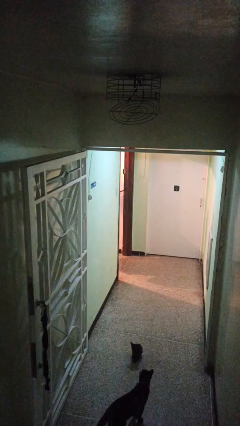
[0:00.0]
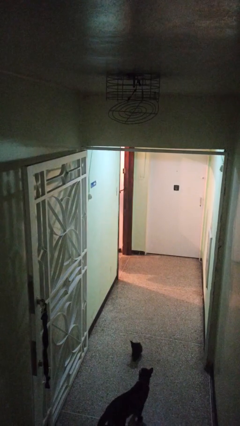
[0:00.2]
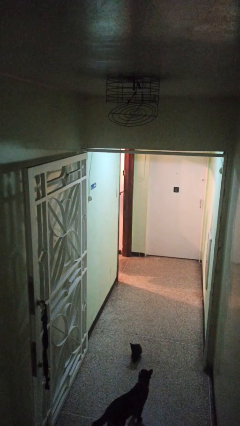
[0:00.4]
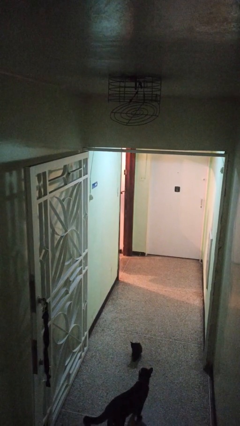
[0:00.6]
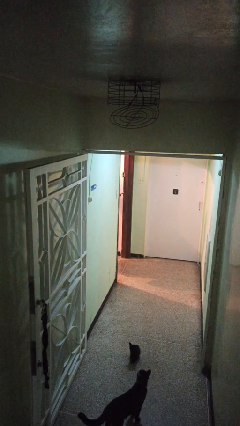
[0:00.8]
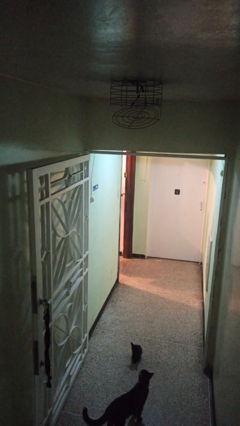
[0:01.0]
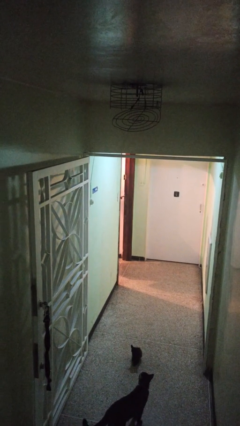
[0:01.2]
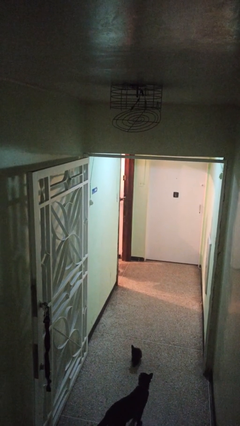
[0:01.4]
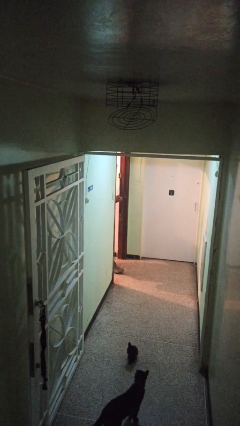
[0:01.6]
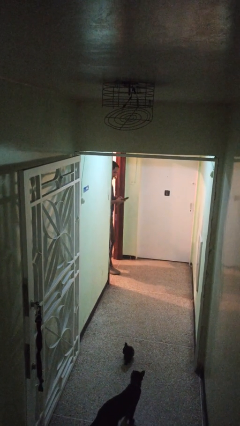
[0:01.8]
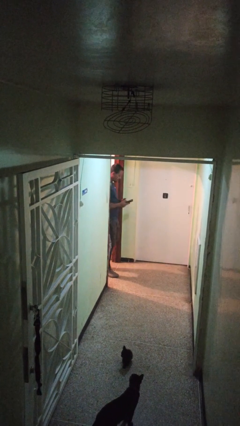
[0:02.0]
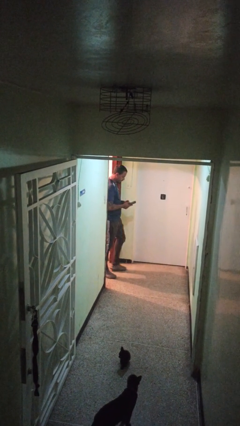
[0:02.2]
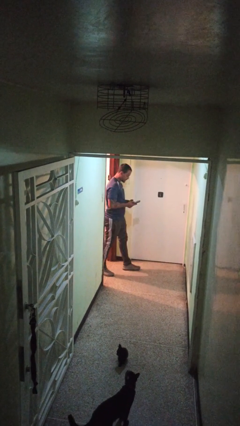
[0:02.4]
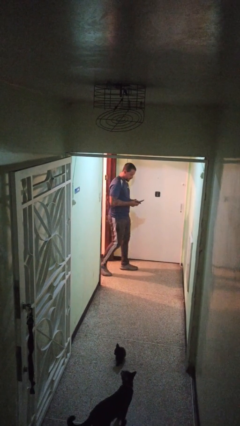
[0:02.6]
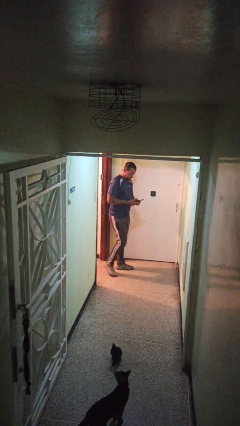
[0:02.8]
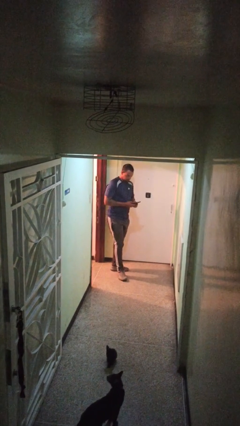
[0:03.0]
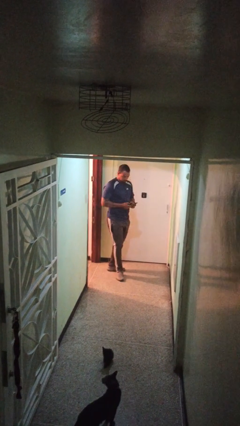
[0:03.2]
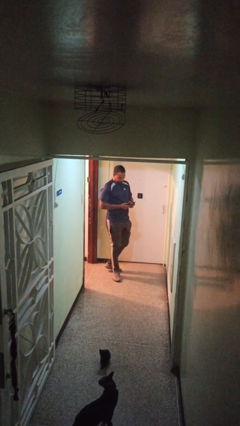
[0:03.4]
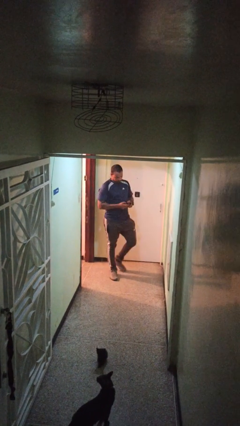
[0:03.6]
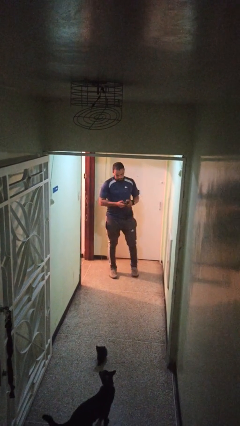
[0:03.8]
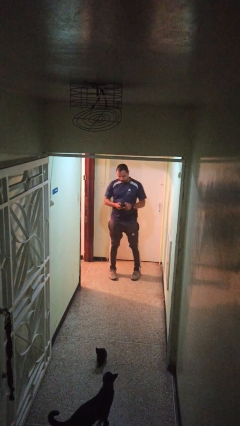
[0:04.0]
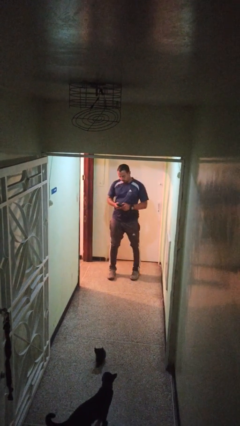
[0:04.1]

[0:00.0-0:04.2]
person enters scene through structure

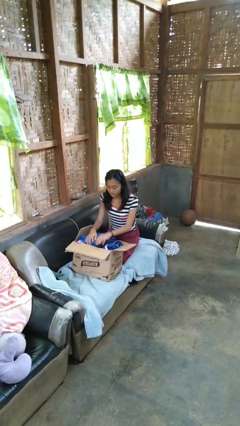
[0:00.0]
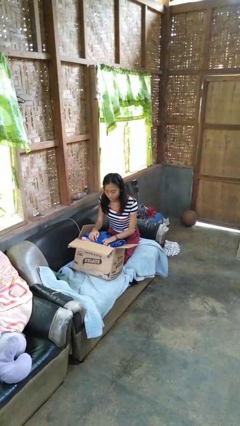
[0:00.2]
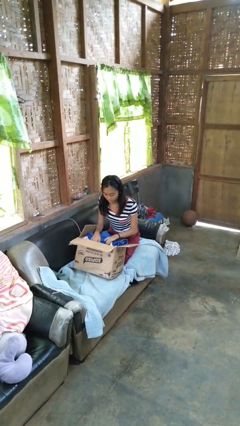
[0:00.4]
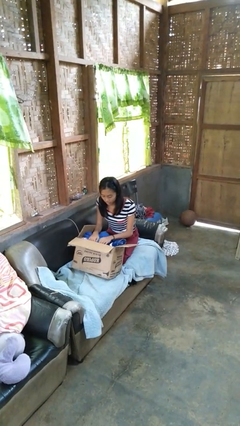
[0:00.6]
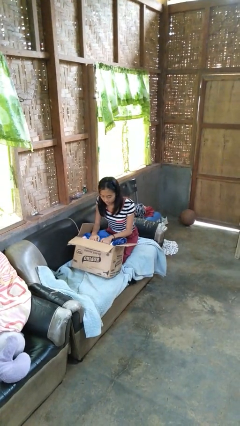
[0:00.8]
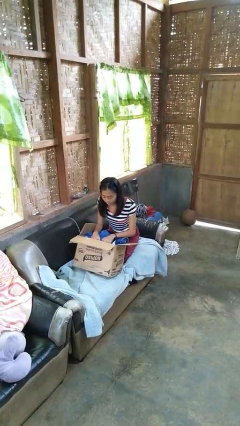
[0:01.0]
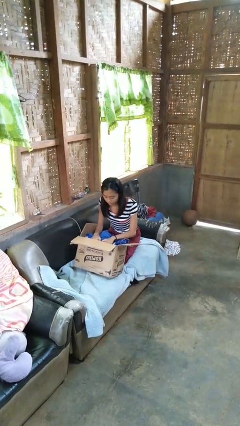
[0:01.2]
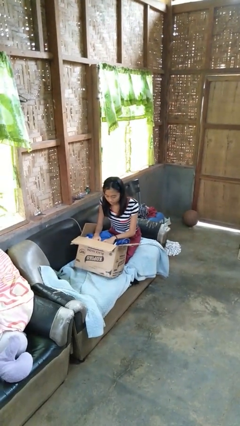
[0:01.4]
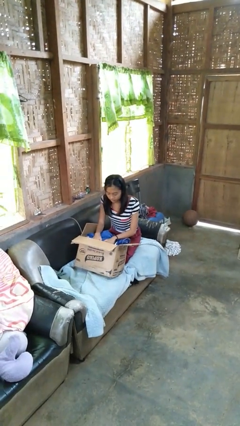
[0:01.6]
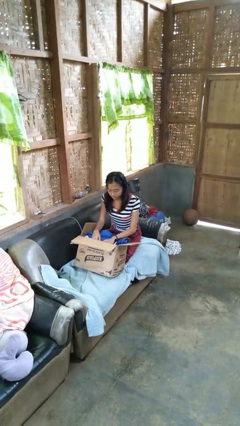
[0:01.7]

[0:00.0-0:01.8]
person searches in box

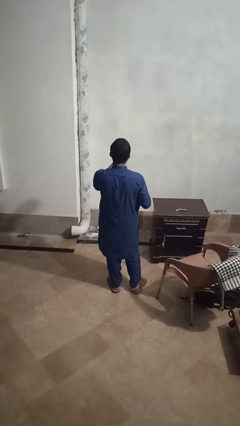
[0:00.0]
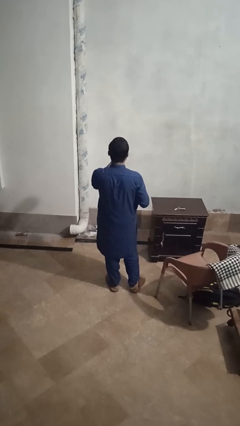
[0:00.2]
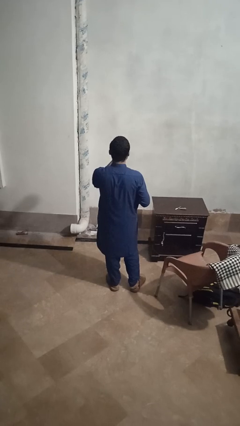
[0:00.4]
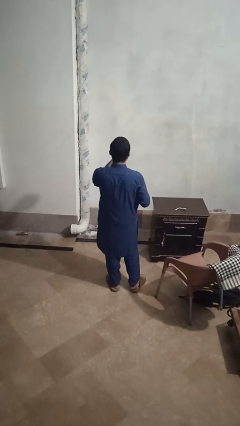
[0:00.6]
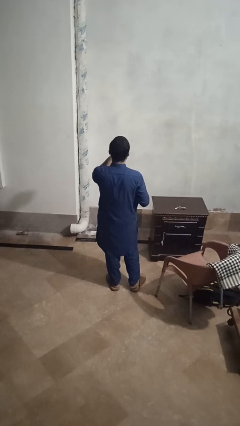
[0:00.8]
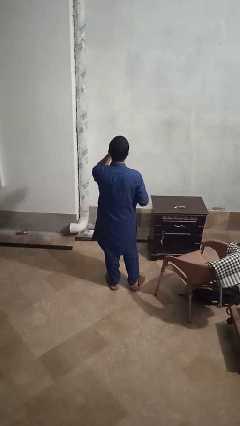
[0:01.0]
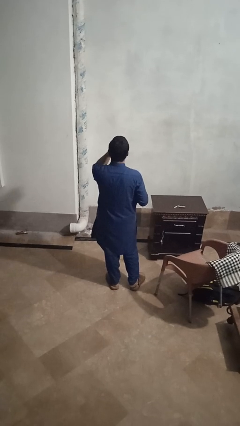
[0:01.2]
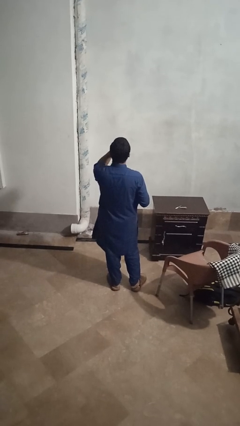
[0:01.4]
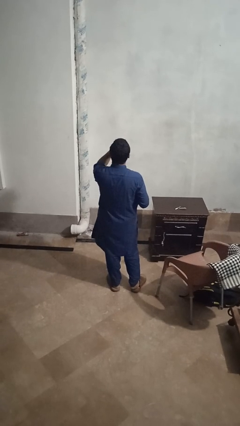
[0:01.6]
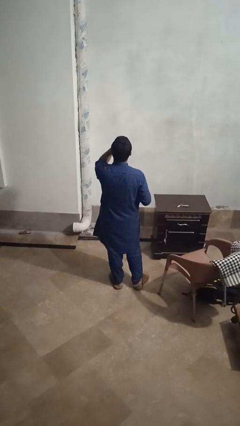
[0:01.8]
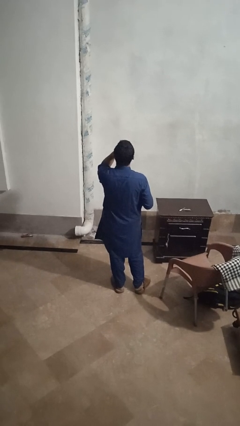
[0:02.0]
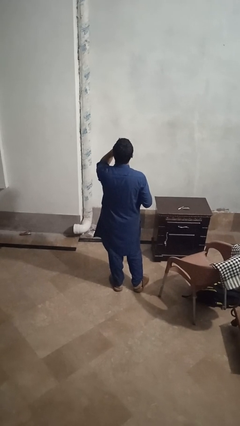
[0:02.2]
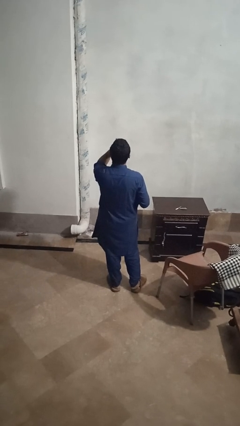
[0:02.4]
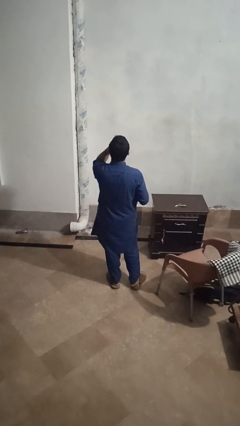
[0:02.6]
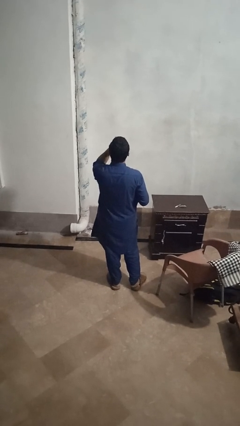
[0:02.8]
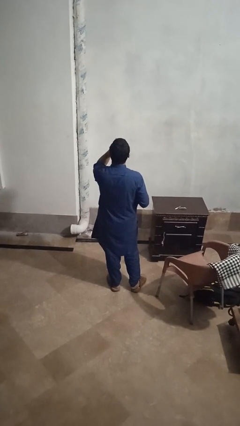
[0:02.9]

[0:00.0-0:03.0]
person drinks from beverage can

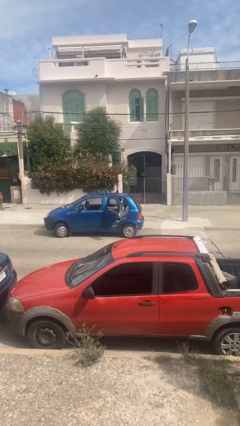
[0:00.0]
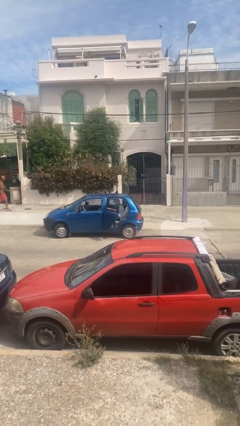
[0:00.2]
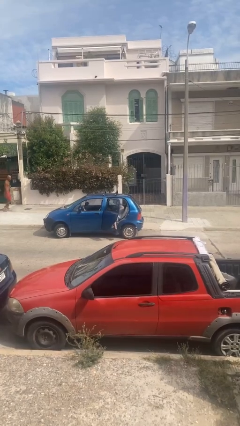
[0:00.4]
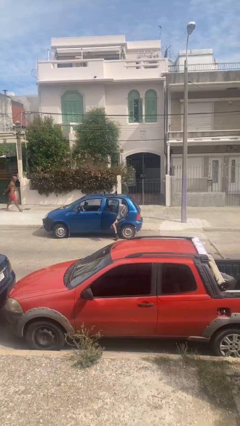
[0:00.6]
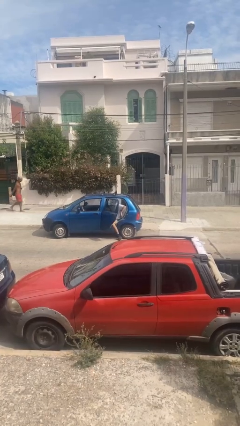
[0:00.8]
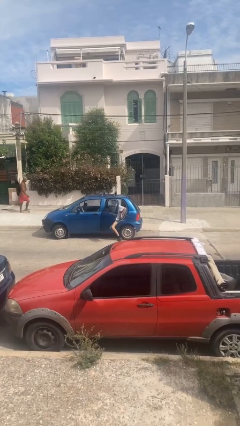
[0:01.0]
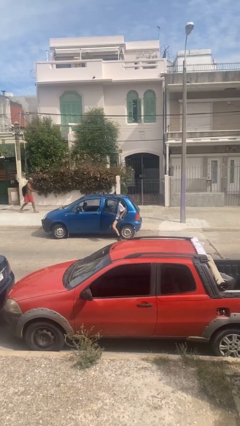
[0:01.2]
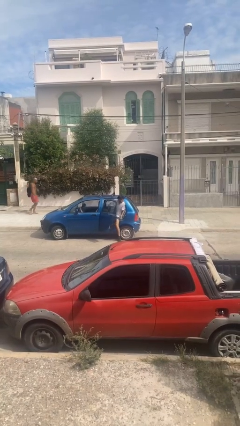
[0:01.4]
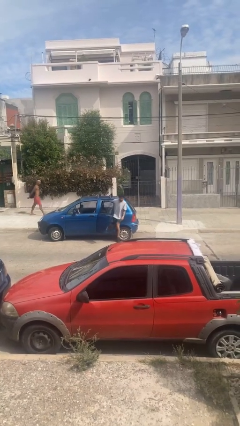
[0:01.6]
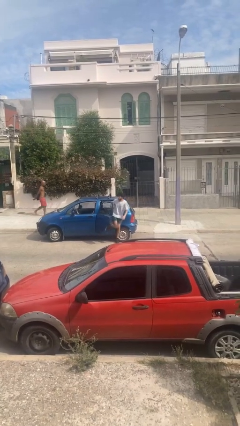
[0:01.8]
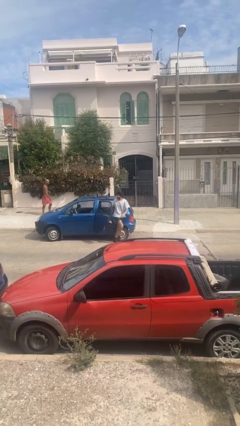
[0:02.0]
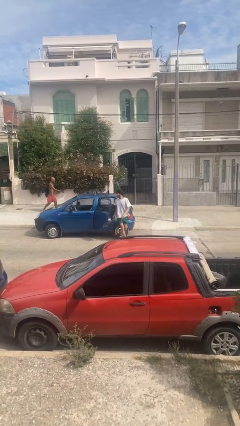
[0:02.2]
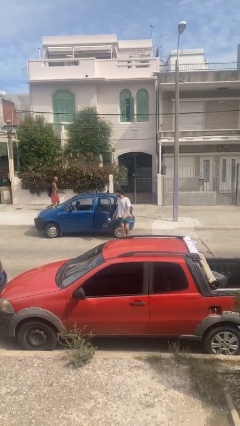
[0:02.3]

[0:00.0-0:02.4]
person exits car

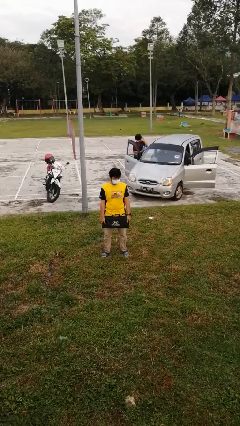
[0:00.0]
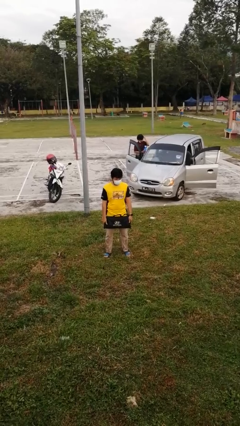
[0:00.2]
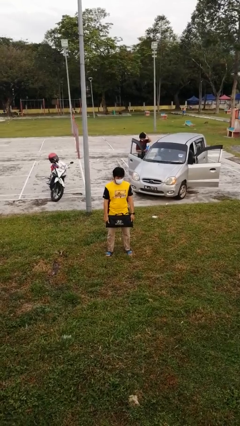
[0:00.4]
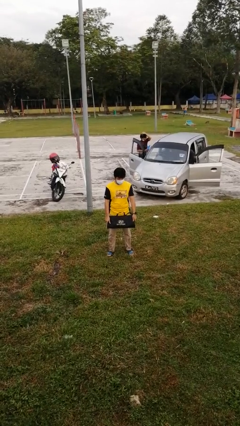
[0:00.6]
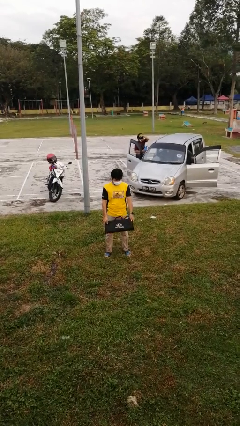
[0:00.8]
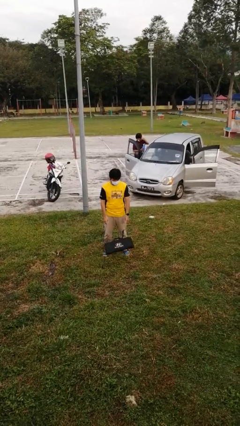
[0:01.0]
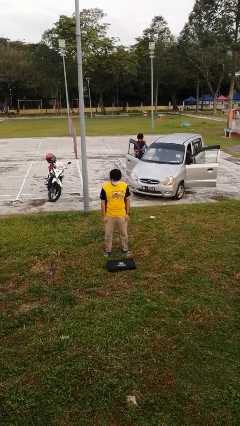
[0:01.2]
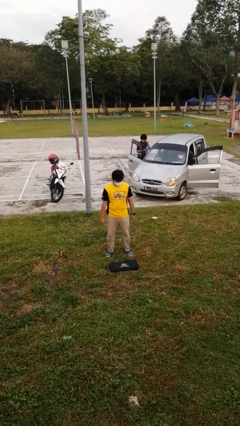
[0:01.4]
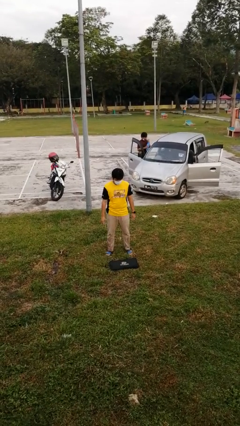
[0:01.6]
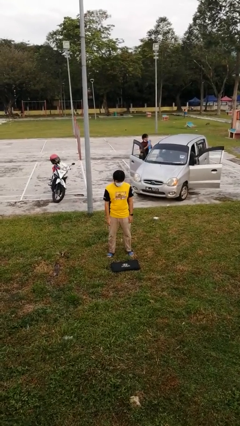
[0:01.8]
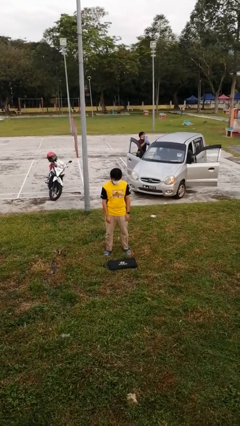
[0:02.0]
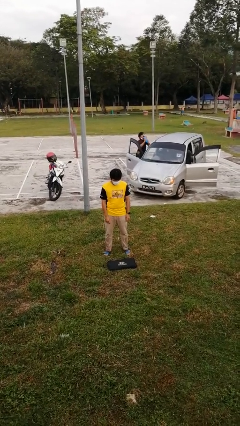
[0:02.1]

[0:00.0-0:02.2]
person drops object

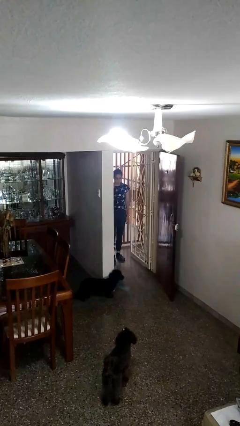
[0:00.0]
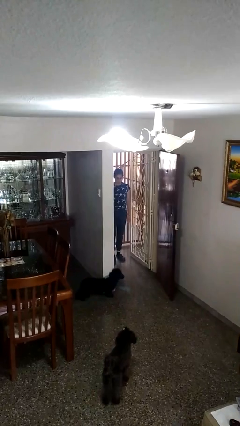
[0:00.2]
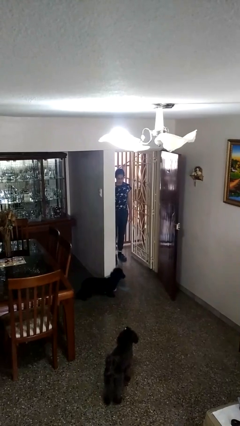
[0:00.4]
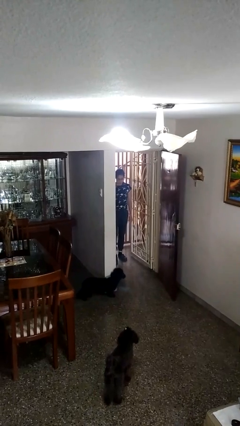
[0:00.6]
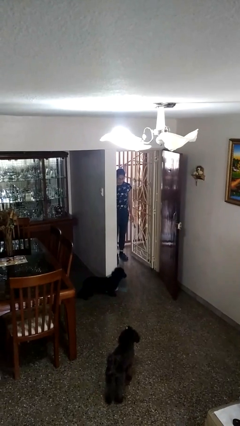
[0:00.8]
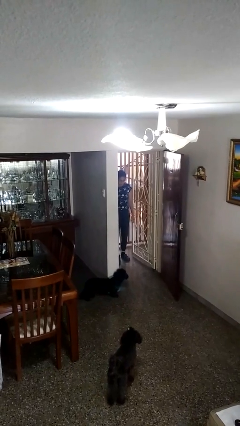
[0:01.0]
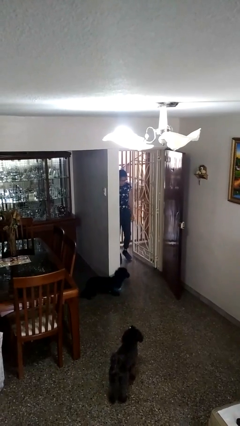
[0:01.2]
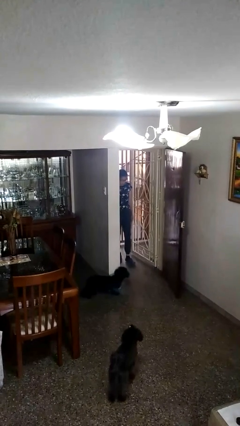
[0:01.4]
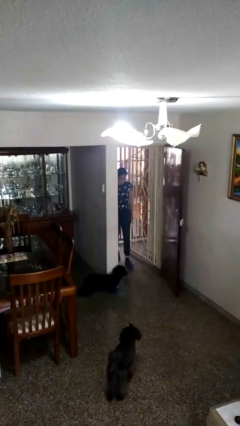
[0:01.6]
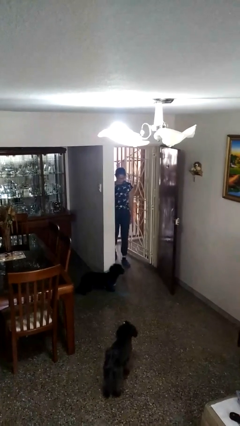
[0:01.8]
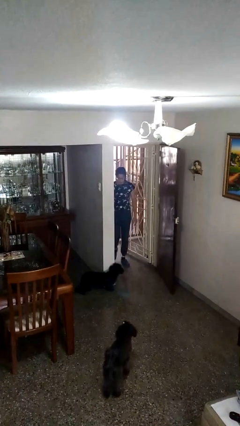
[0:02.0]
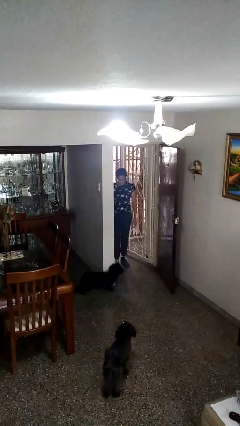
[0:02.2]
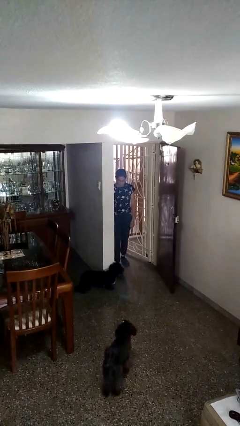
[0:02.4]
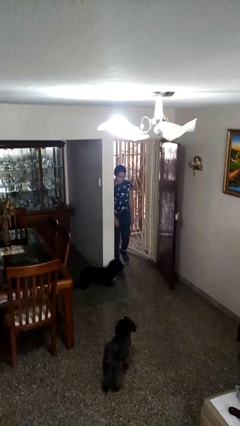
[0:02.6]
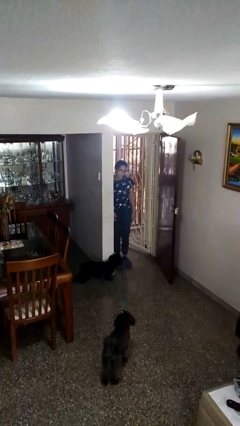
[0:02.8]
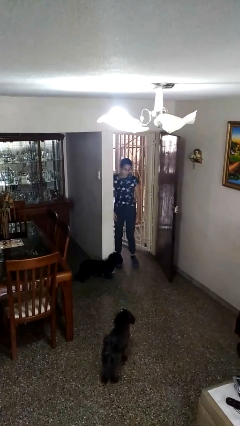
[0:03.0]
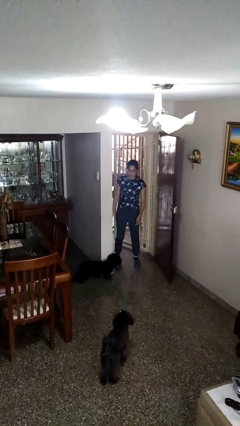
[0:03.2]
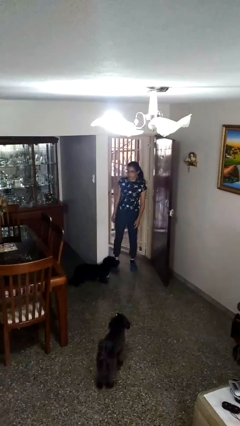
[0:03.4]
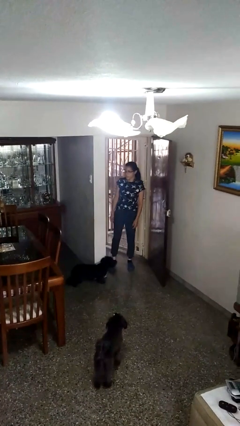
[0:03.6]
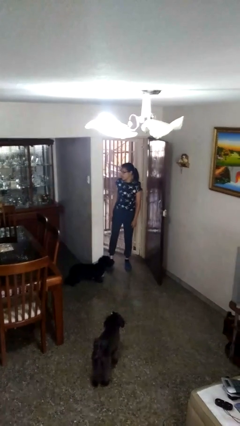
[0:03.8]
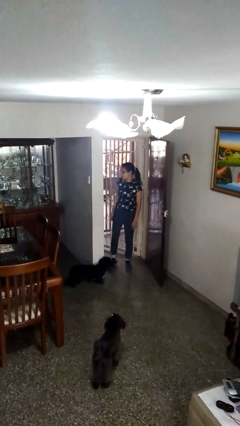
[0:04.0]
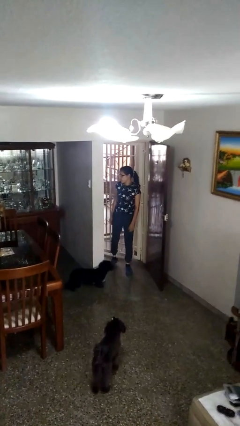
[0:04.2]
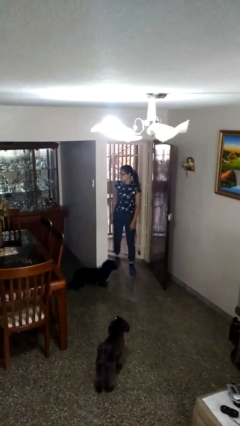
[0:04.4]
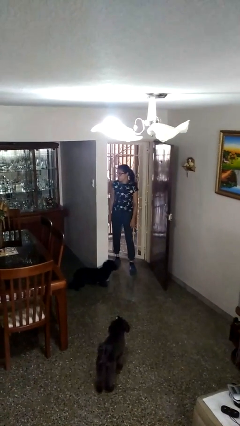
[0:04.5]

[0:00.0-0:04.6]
person bumps into wall
